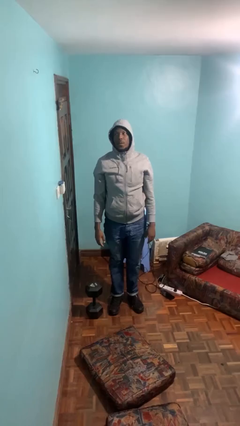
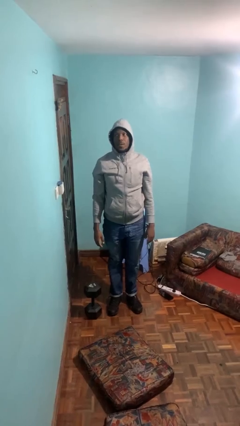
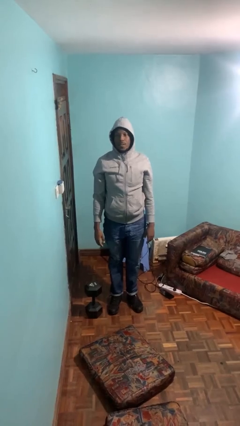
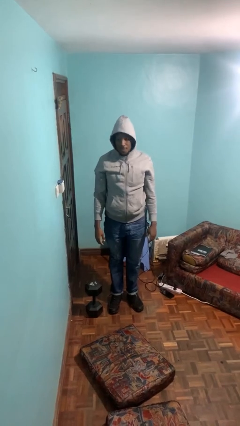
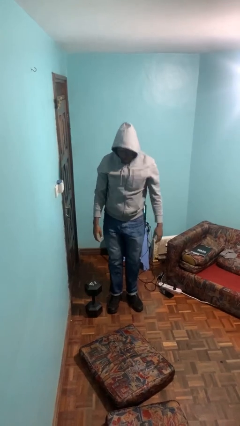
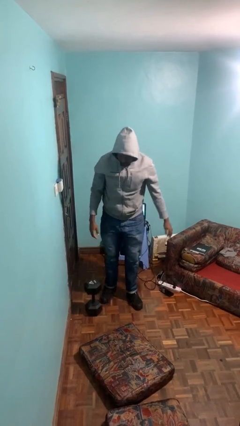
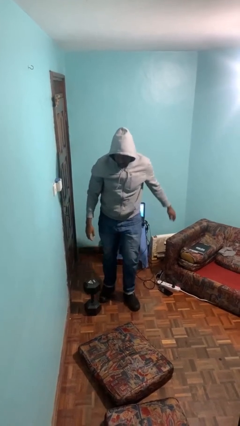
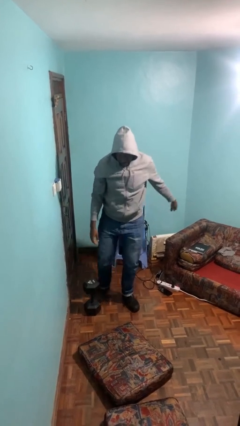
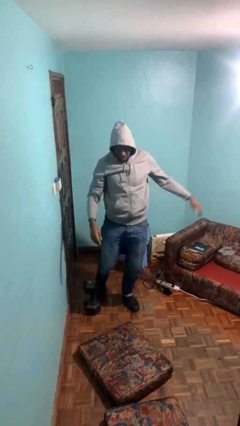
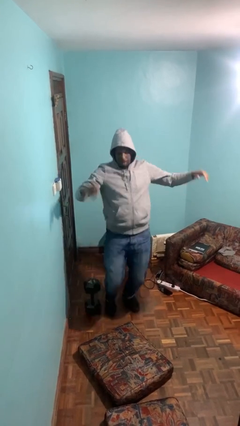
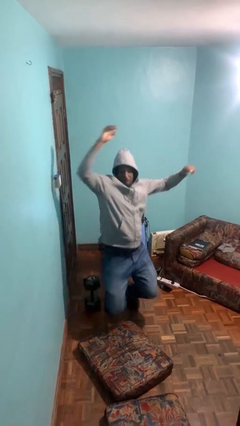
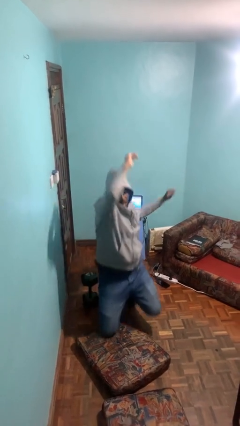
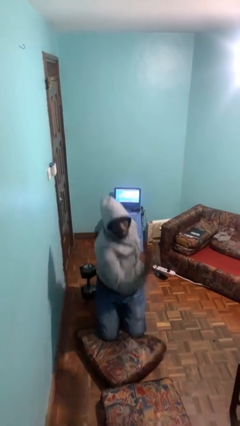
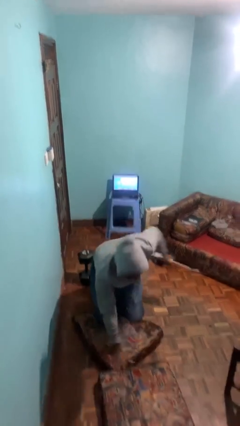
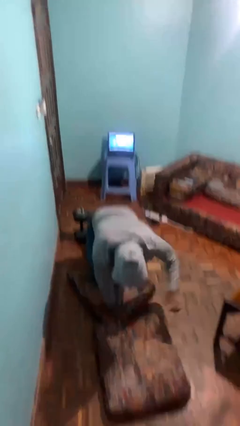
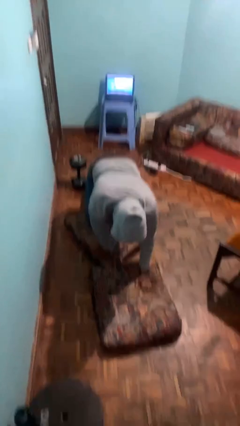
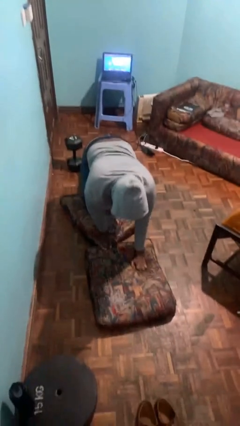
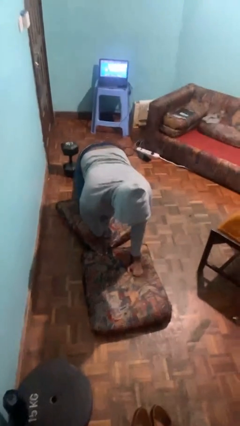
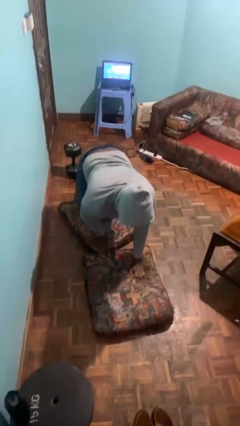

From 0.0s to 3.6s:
person trips on object on floor

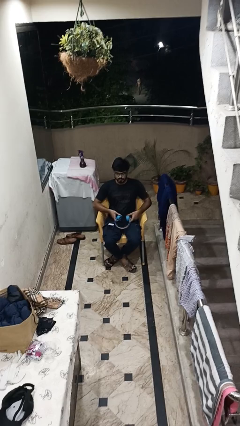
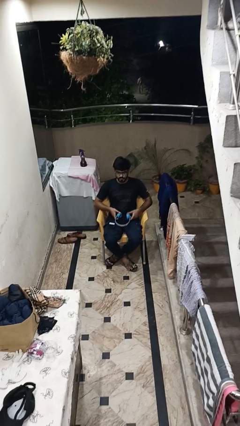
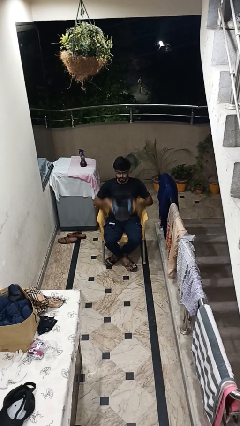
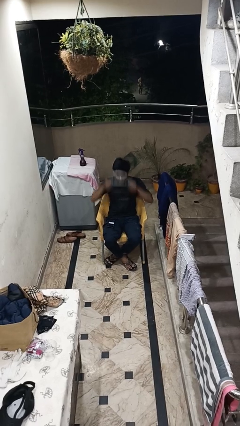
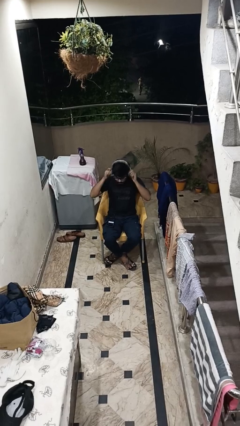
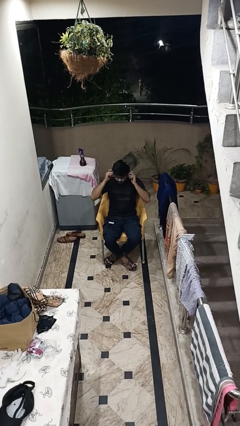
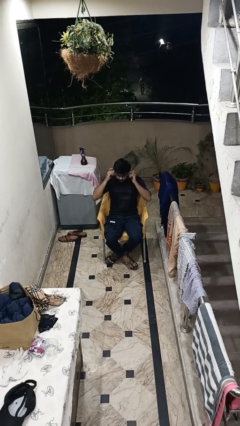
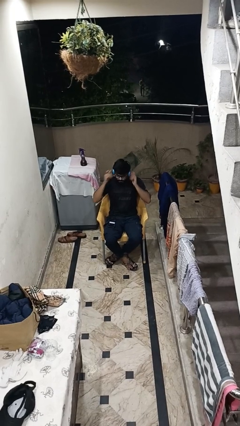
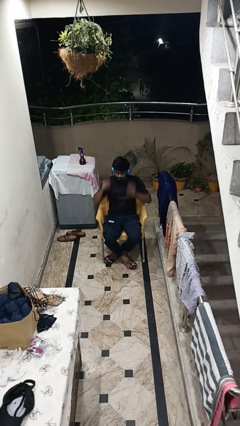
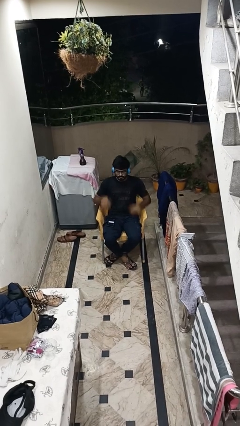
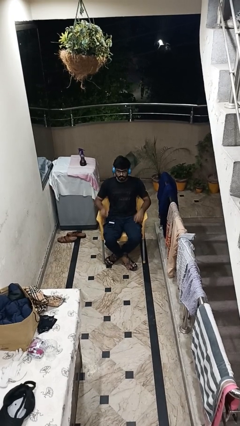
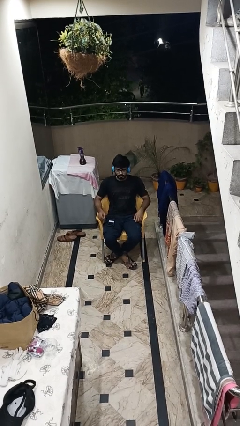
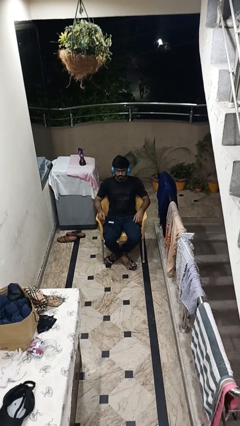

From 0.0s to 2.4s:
person puts on headphones

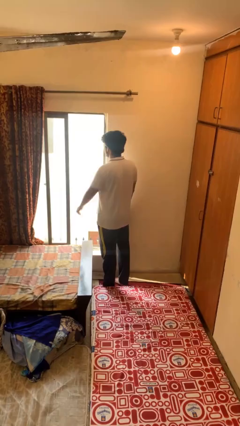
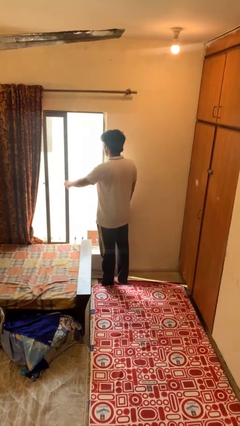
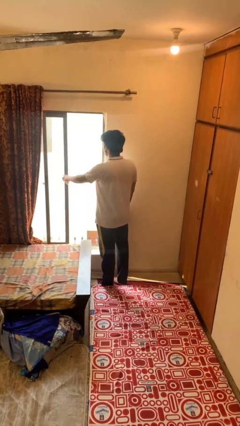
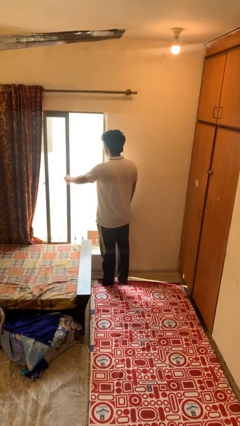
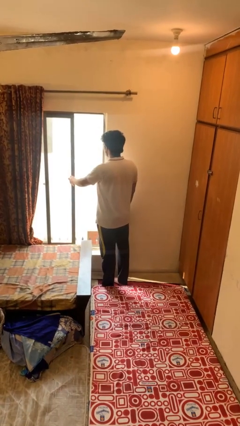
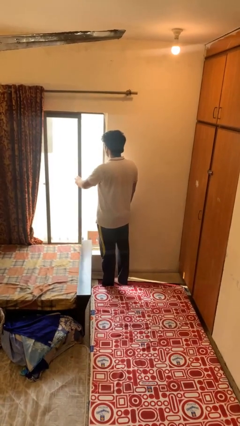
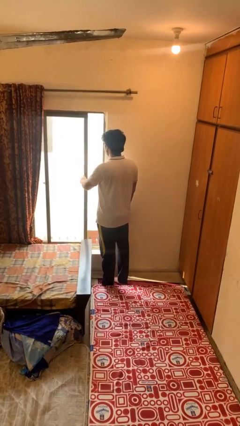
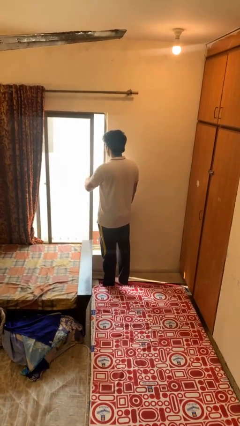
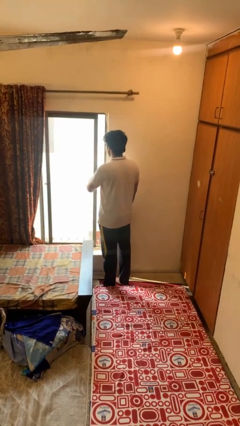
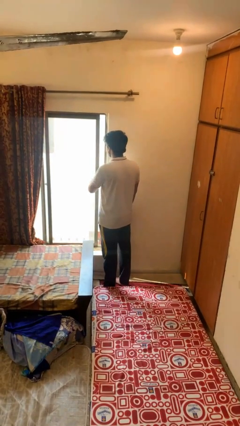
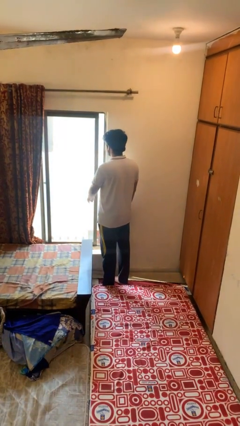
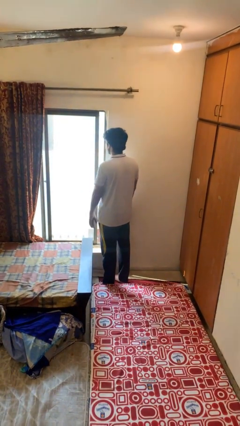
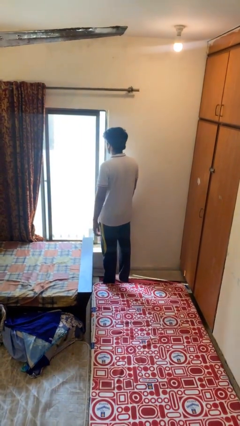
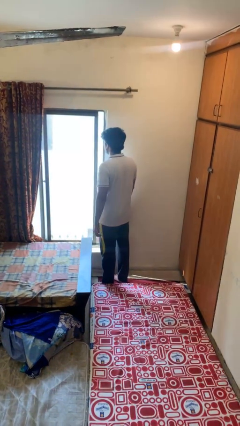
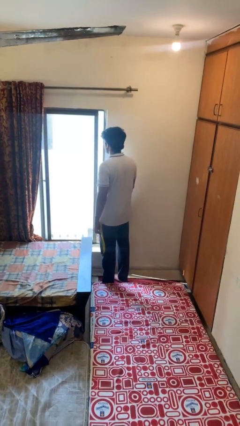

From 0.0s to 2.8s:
person closes home window

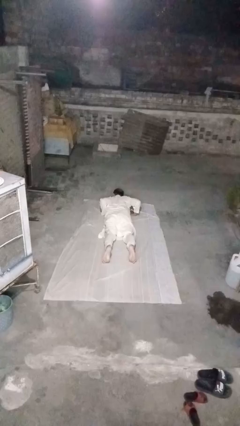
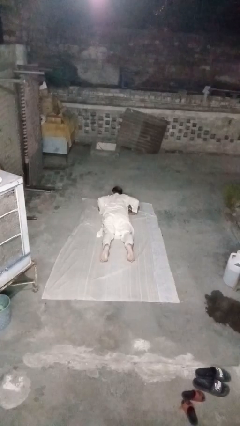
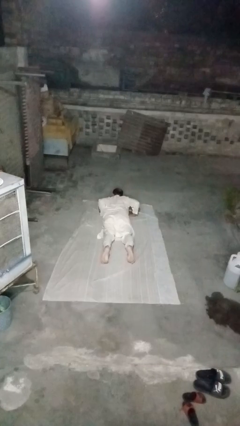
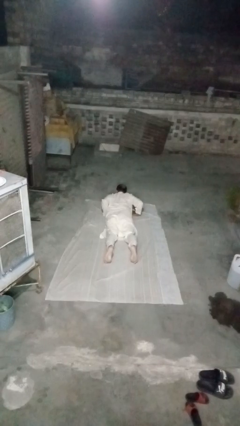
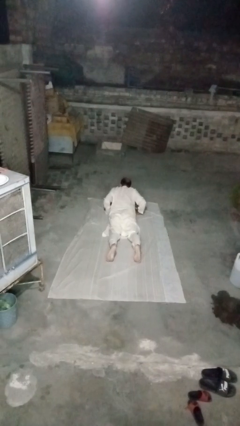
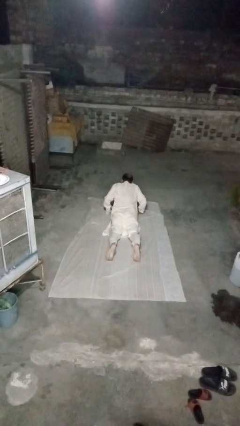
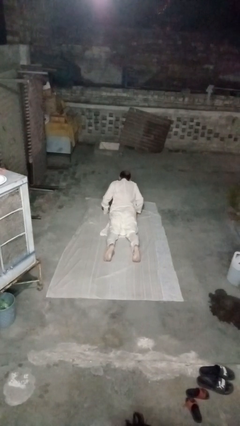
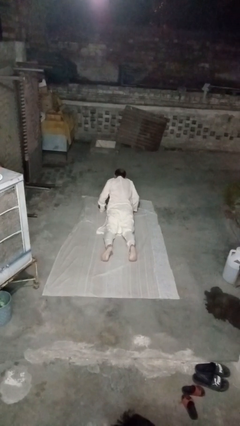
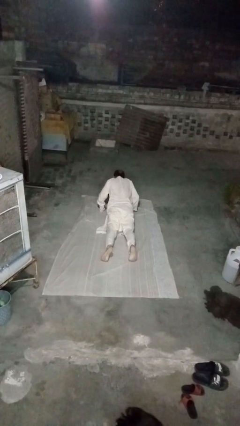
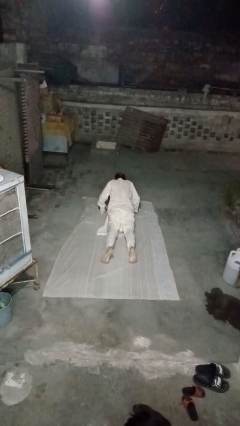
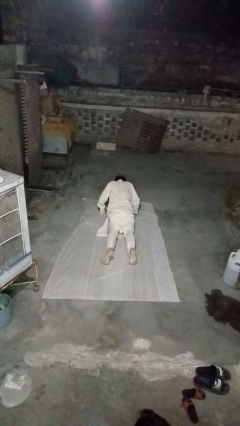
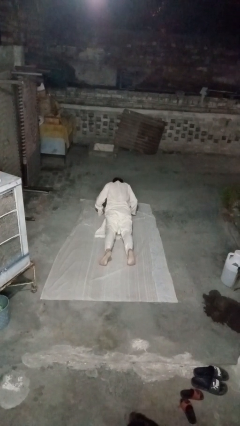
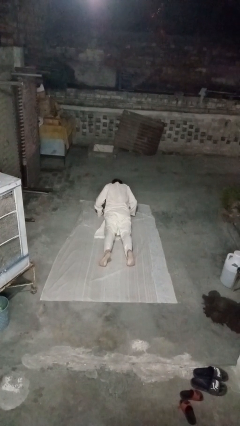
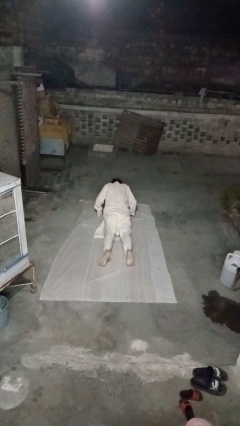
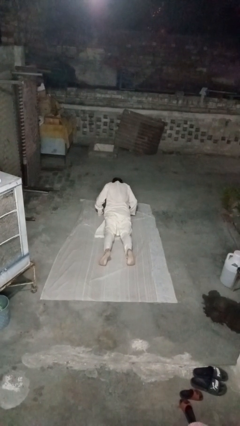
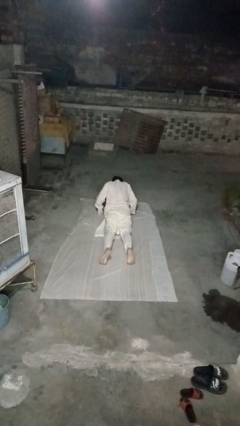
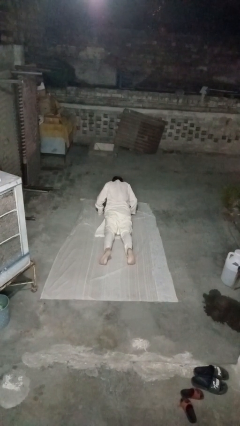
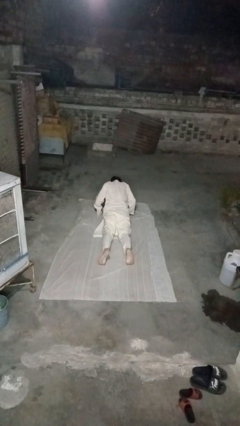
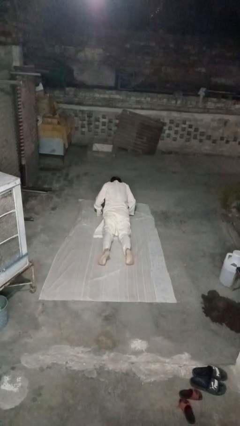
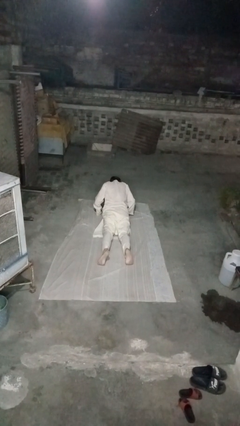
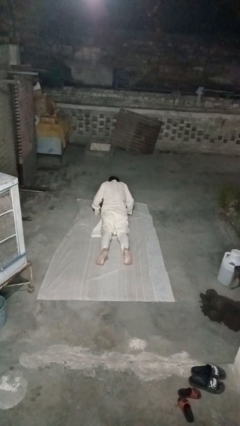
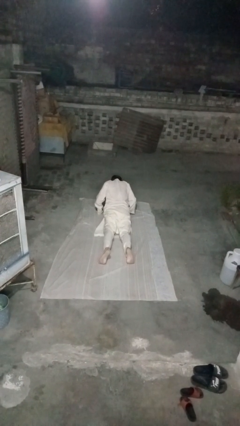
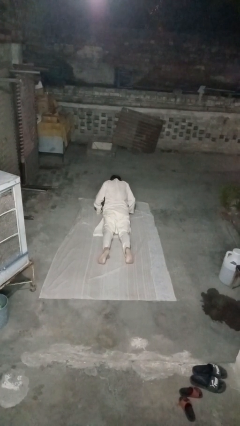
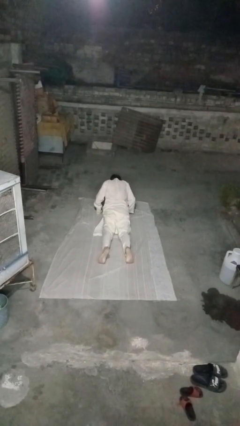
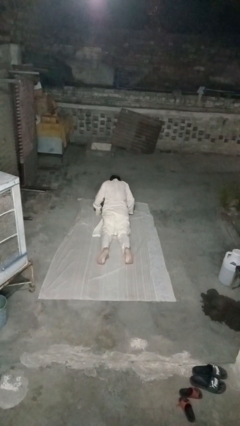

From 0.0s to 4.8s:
person exercises with plank

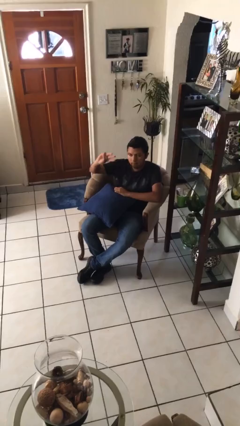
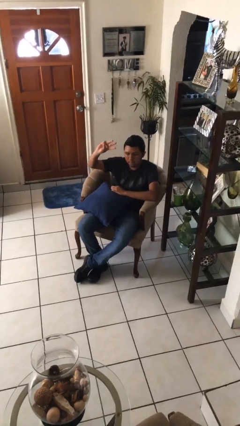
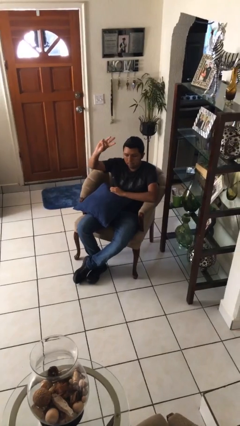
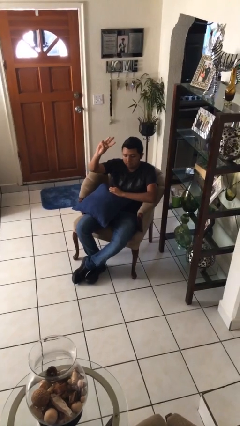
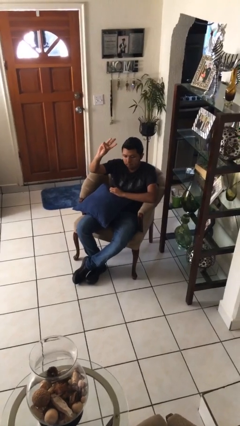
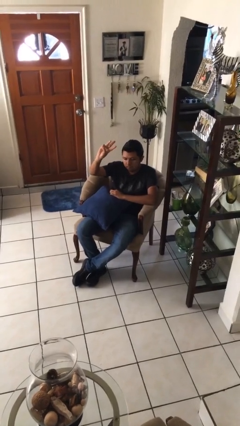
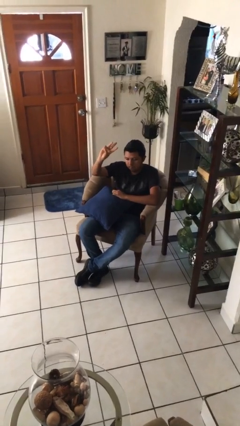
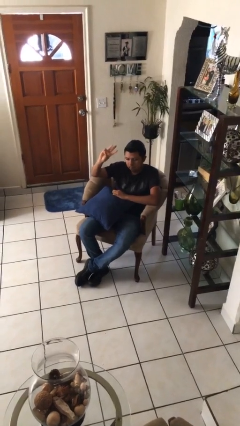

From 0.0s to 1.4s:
person gestures number three

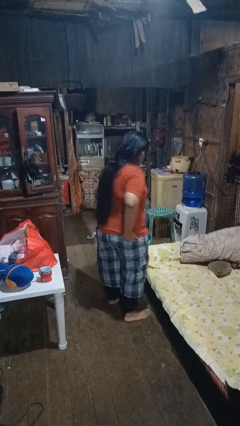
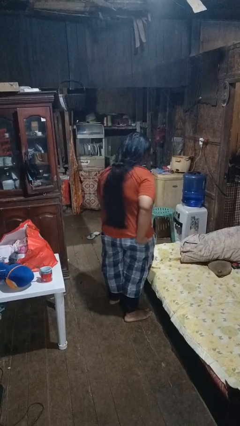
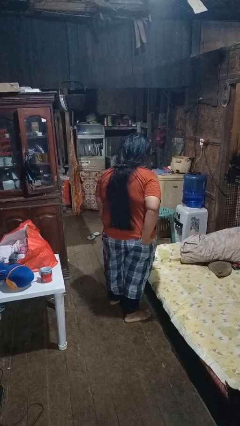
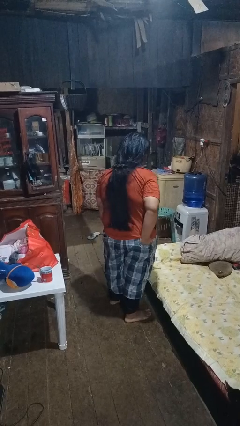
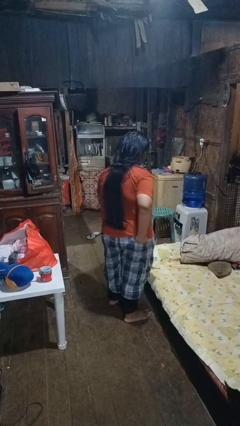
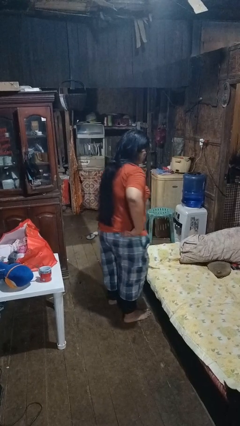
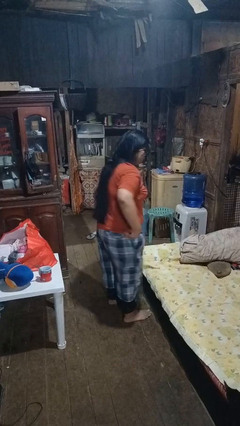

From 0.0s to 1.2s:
person puts hands in back pockets

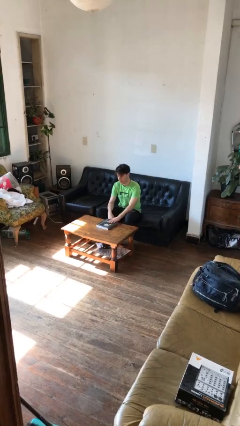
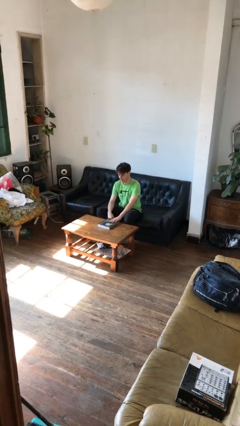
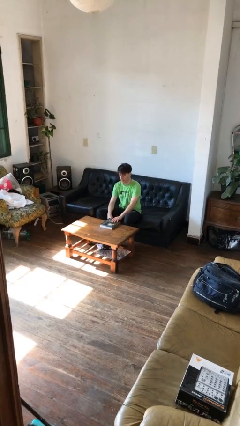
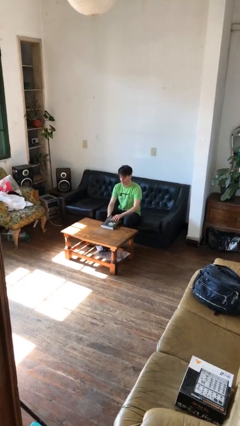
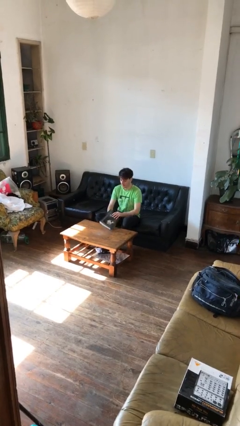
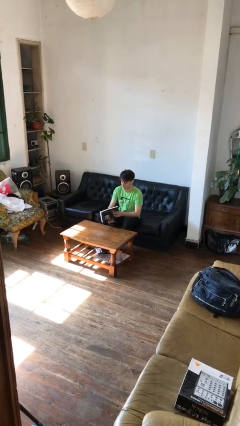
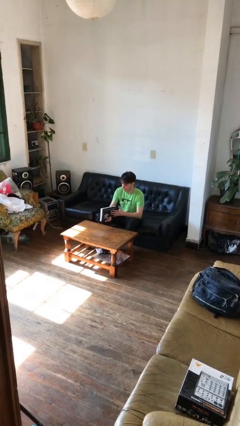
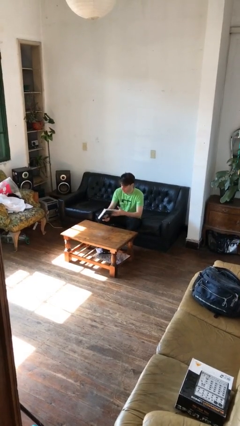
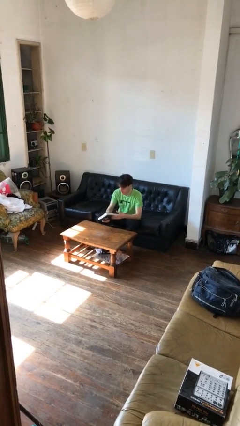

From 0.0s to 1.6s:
person picks up object from table
